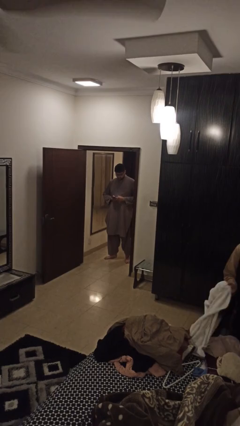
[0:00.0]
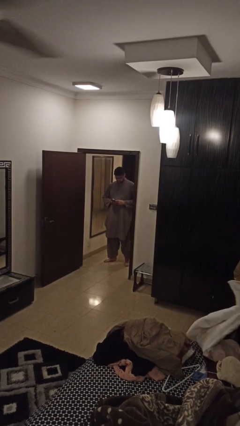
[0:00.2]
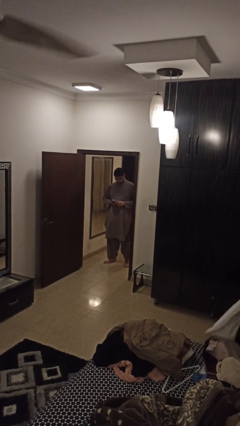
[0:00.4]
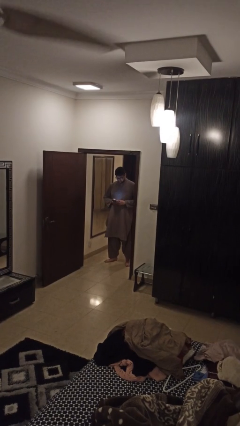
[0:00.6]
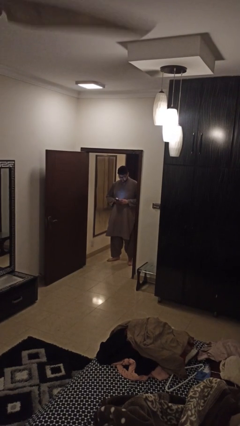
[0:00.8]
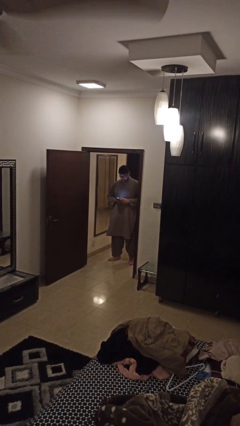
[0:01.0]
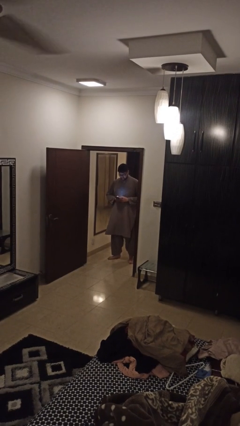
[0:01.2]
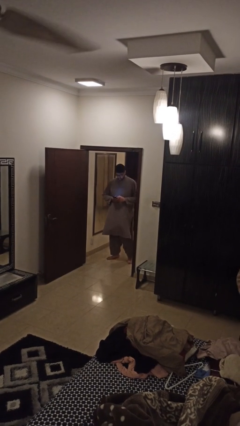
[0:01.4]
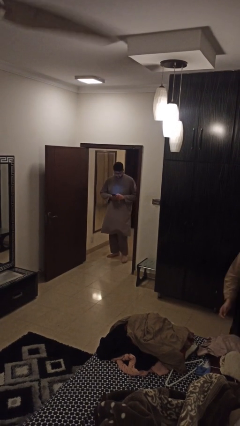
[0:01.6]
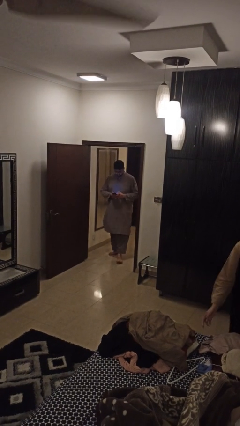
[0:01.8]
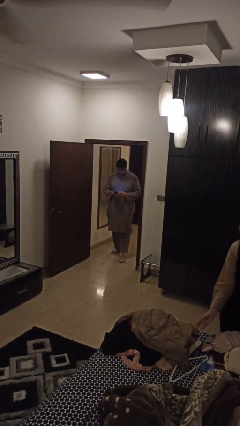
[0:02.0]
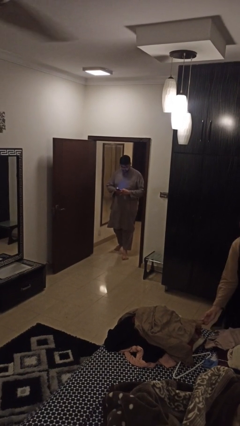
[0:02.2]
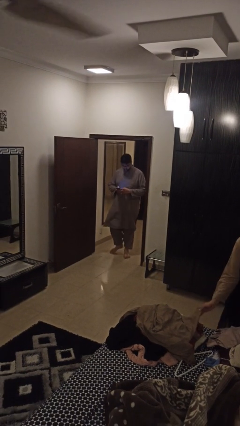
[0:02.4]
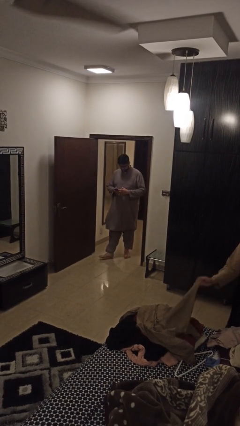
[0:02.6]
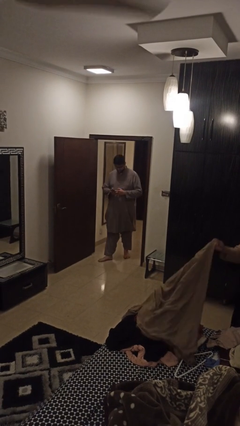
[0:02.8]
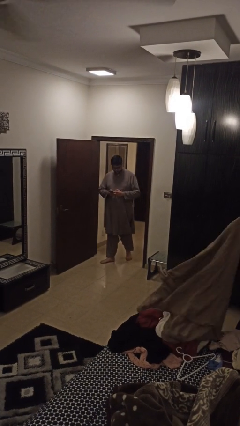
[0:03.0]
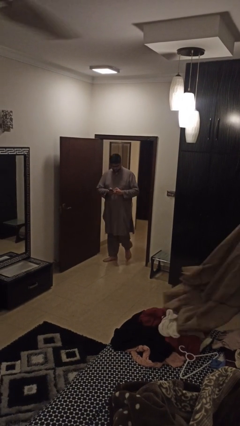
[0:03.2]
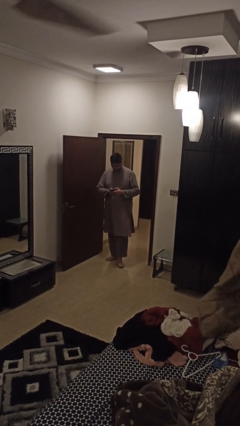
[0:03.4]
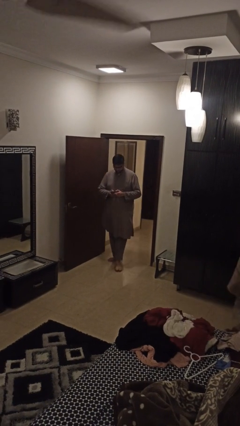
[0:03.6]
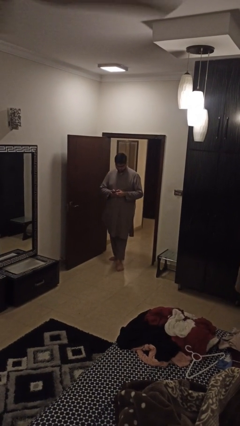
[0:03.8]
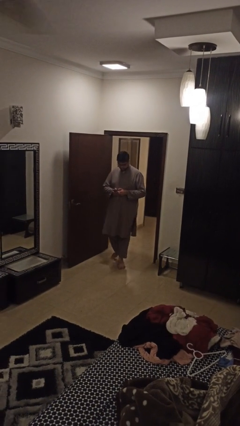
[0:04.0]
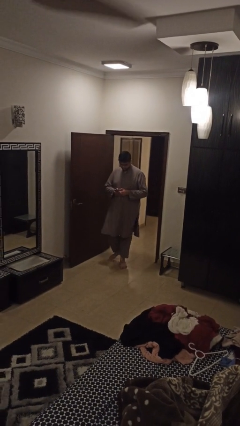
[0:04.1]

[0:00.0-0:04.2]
person enters scene through structure

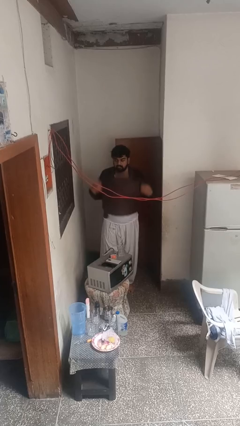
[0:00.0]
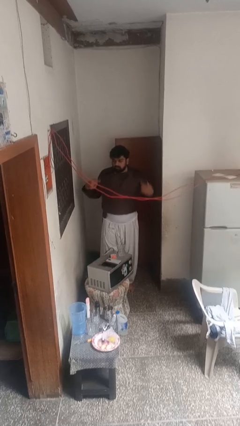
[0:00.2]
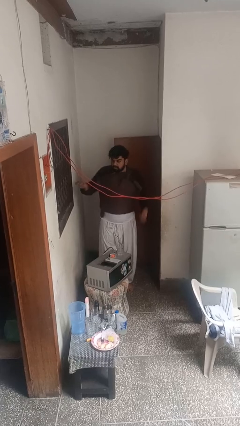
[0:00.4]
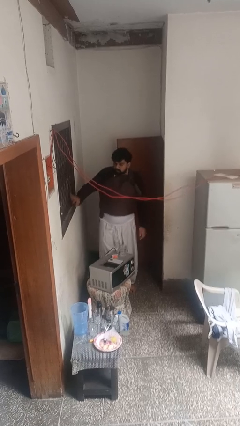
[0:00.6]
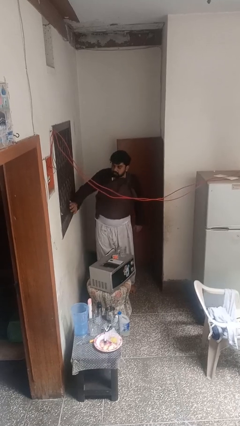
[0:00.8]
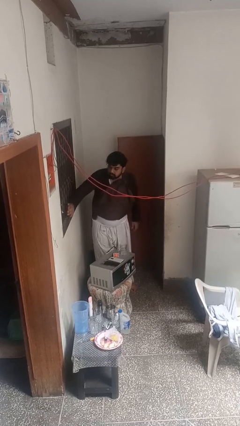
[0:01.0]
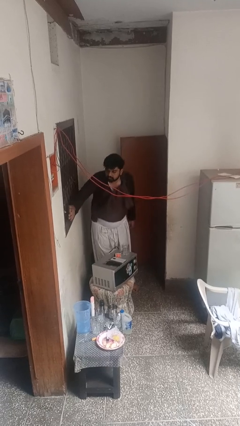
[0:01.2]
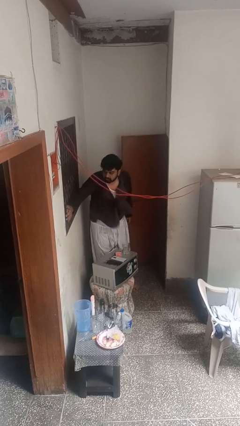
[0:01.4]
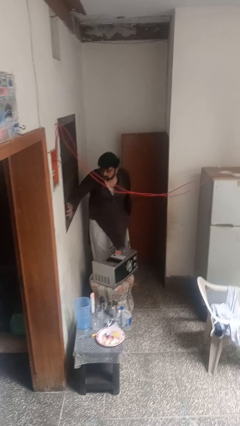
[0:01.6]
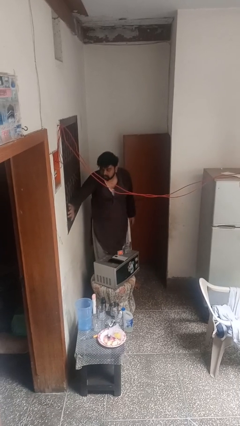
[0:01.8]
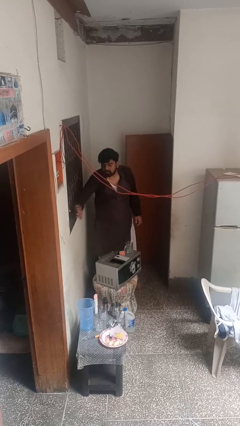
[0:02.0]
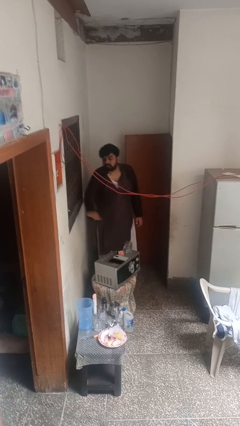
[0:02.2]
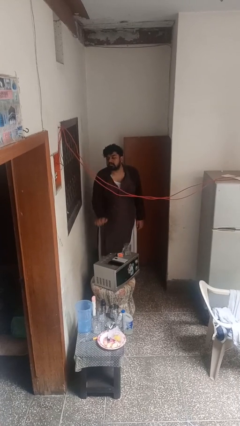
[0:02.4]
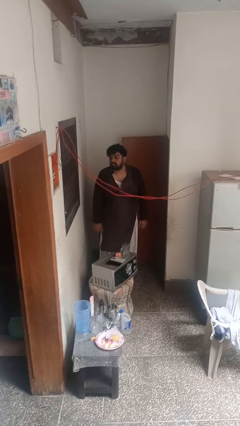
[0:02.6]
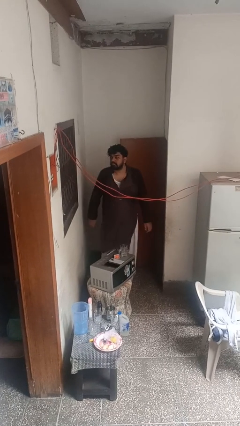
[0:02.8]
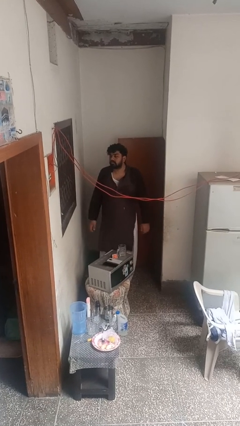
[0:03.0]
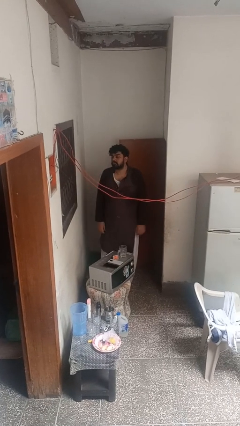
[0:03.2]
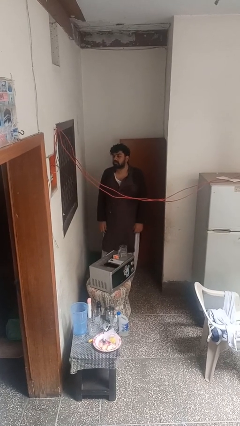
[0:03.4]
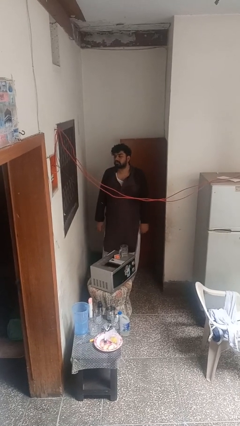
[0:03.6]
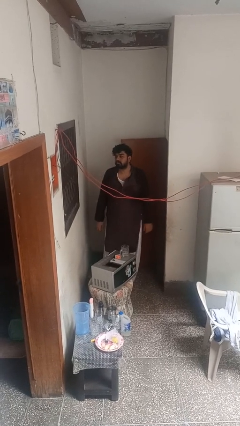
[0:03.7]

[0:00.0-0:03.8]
person opens home window

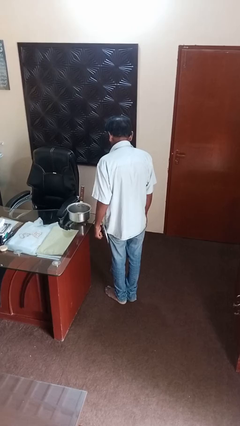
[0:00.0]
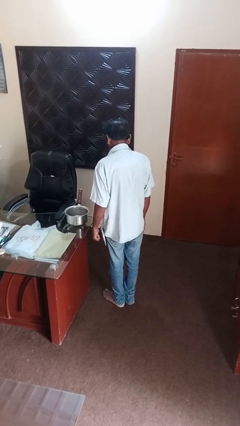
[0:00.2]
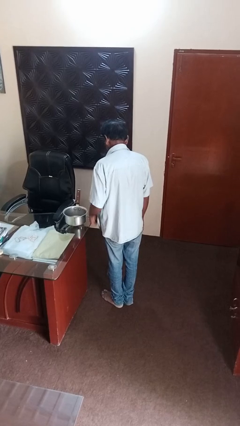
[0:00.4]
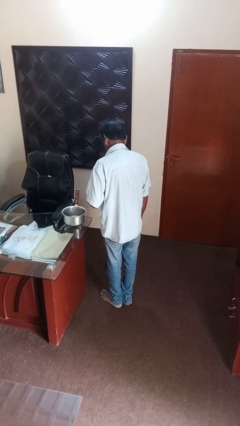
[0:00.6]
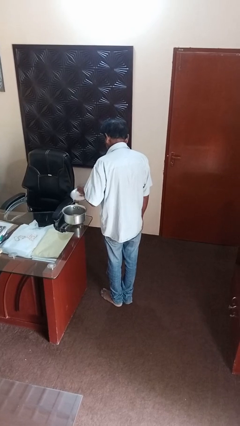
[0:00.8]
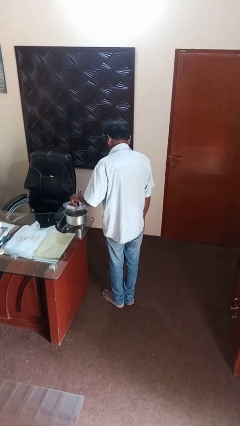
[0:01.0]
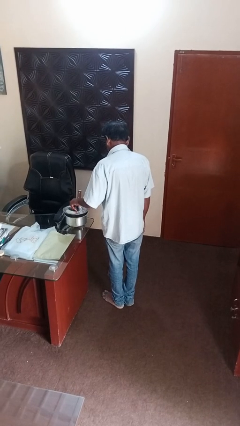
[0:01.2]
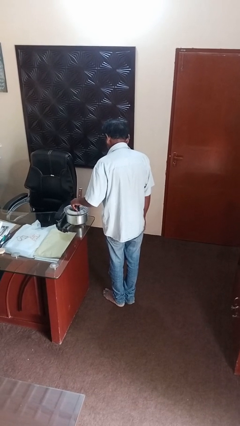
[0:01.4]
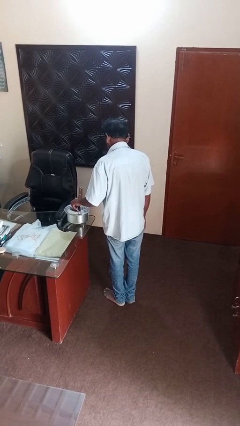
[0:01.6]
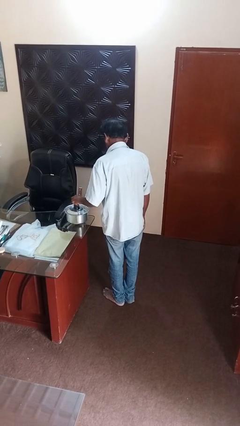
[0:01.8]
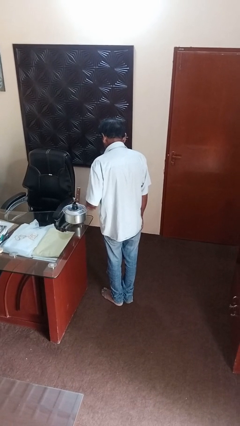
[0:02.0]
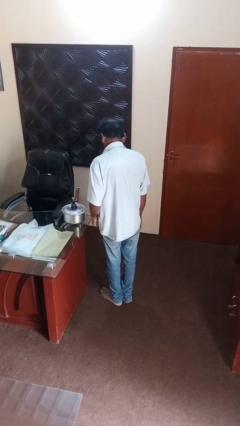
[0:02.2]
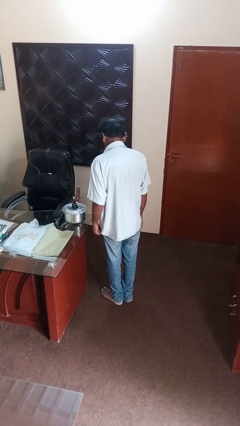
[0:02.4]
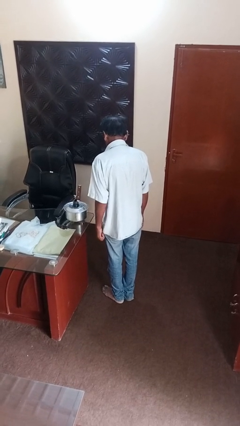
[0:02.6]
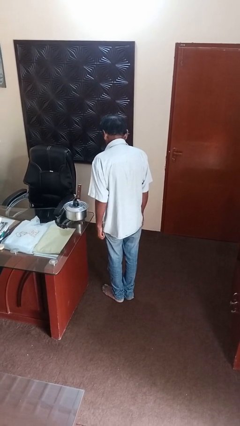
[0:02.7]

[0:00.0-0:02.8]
person closes jar

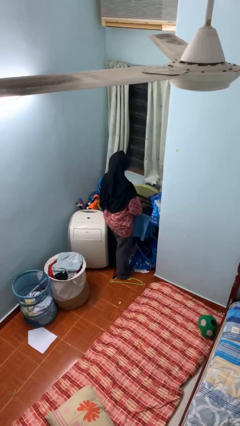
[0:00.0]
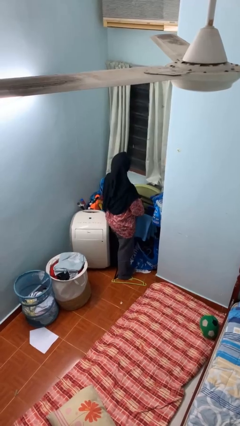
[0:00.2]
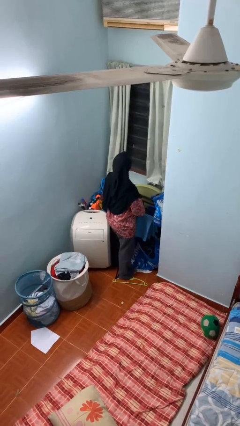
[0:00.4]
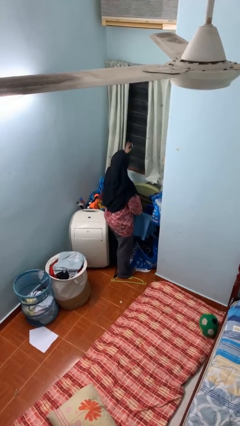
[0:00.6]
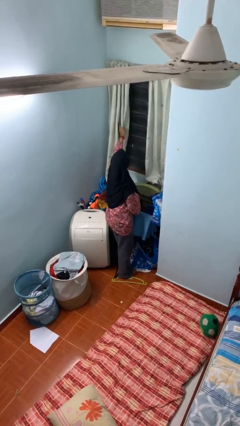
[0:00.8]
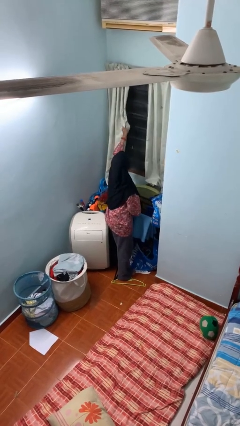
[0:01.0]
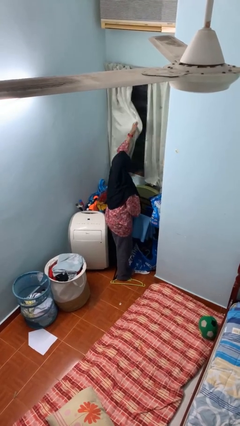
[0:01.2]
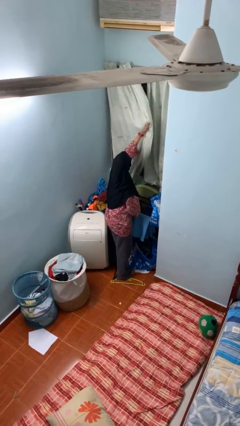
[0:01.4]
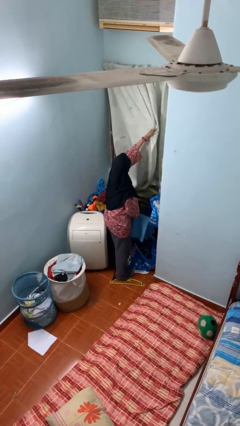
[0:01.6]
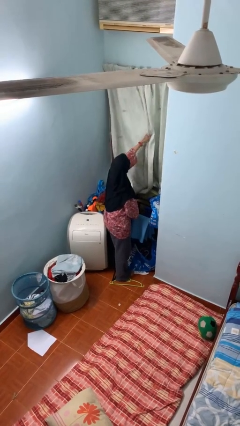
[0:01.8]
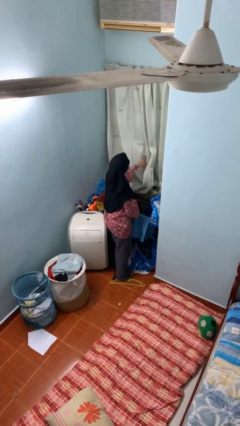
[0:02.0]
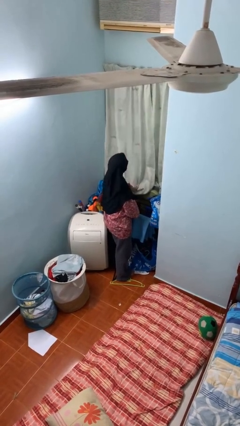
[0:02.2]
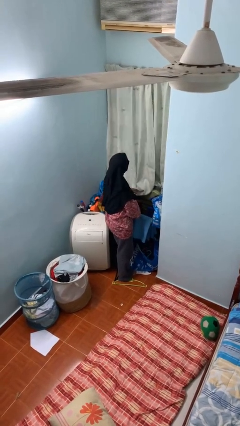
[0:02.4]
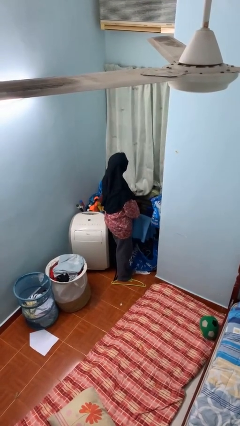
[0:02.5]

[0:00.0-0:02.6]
person closes curtains

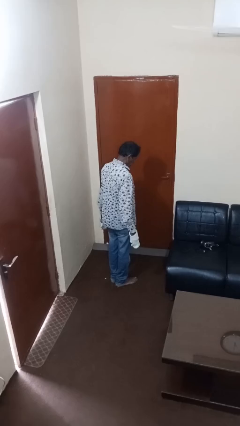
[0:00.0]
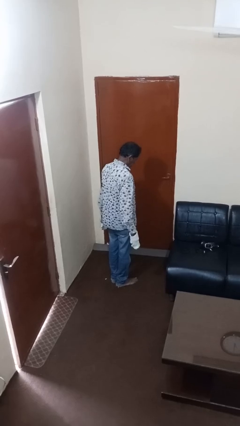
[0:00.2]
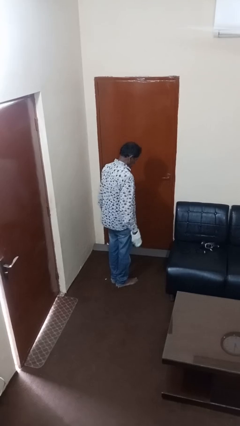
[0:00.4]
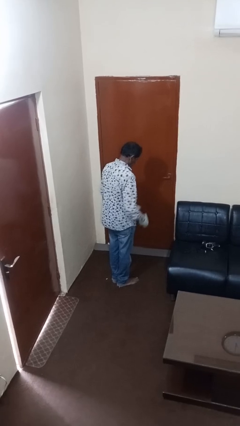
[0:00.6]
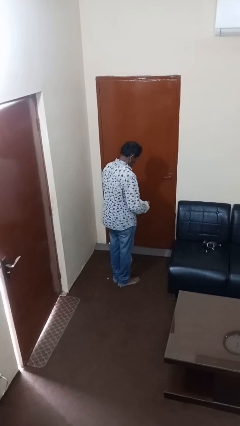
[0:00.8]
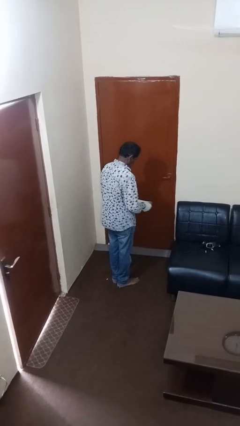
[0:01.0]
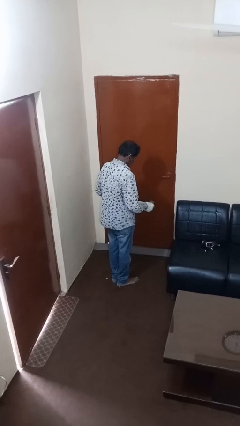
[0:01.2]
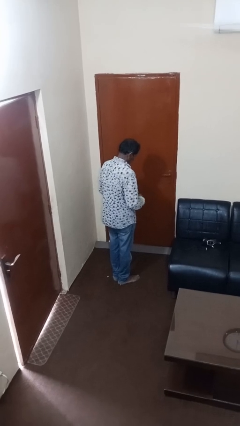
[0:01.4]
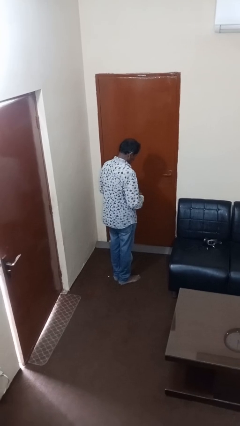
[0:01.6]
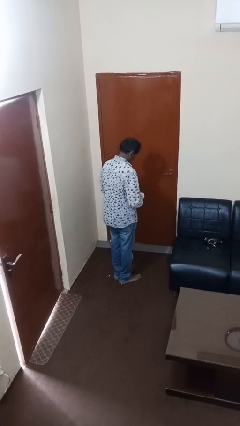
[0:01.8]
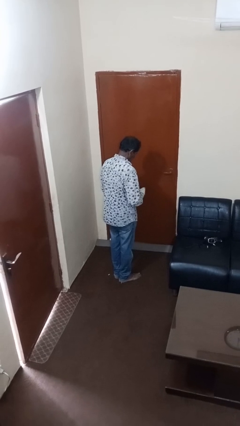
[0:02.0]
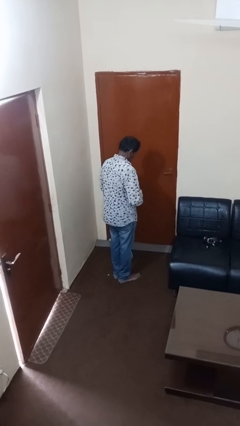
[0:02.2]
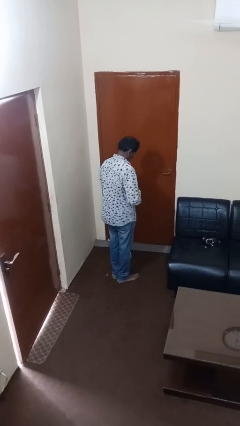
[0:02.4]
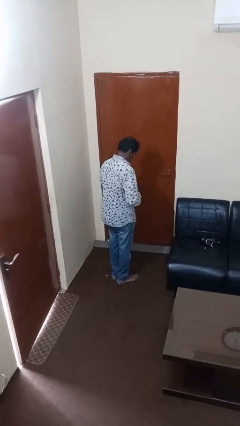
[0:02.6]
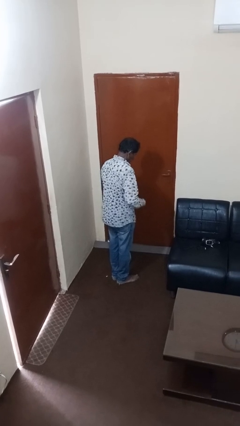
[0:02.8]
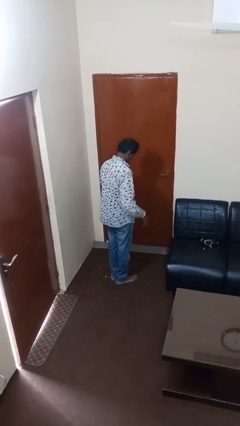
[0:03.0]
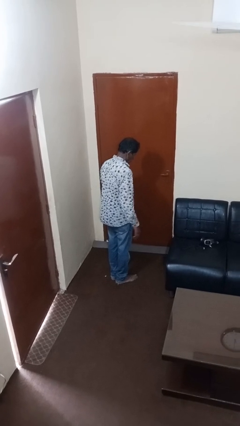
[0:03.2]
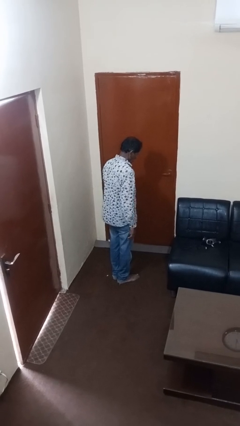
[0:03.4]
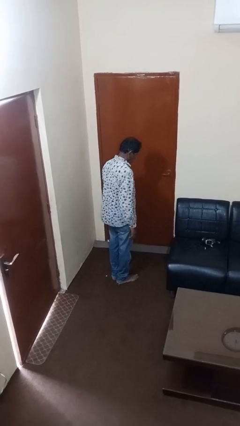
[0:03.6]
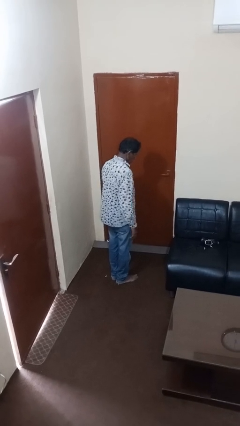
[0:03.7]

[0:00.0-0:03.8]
person takes off gloves
